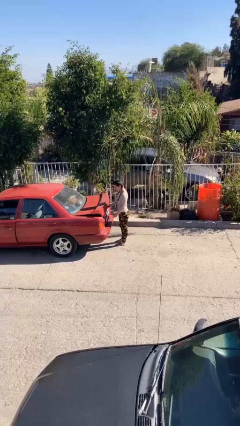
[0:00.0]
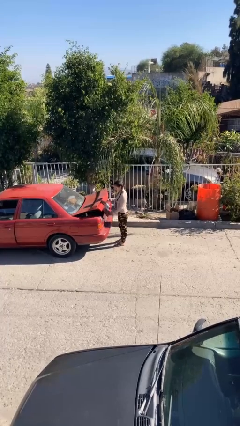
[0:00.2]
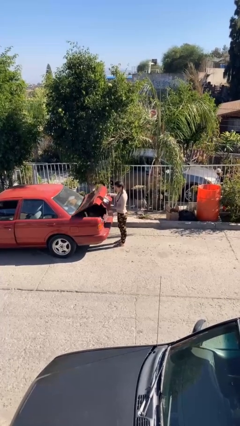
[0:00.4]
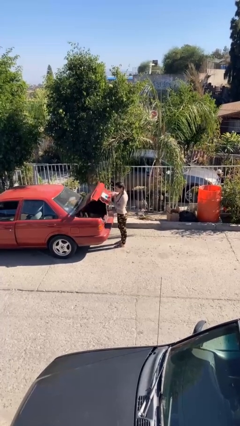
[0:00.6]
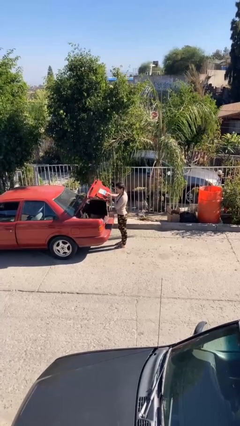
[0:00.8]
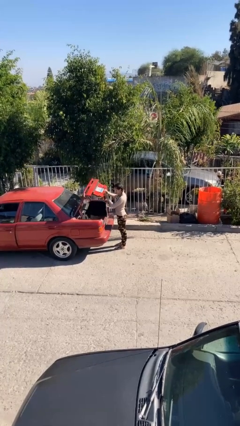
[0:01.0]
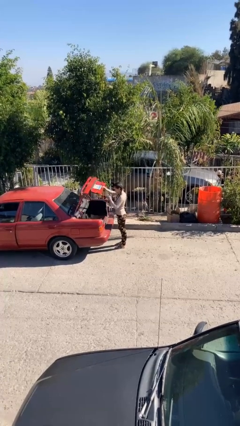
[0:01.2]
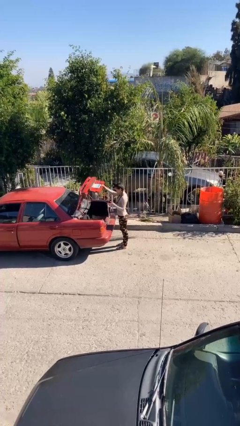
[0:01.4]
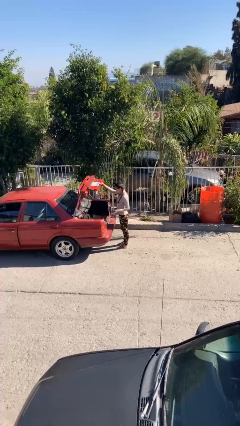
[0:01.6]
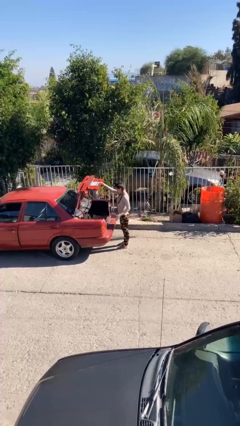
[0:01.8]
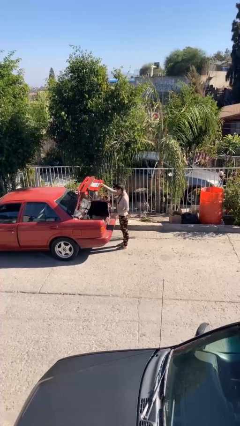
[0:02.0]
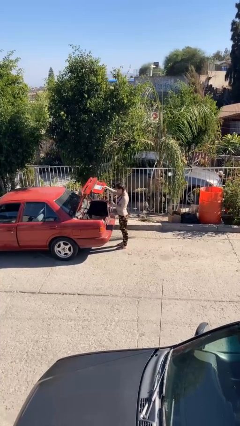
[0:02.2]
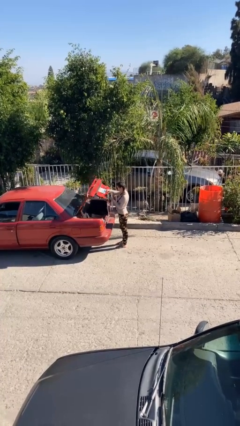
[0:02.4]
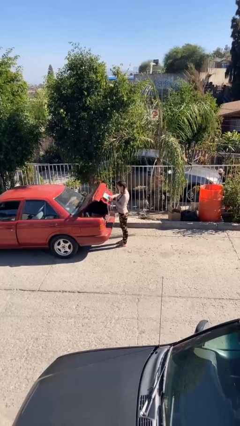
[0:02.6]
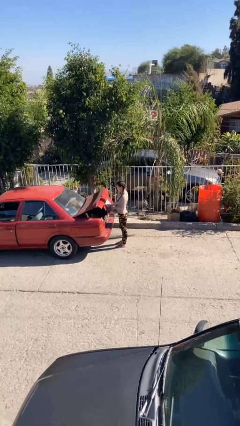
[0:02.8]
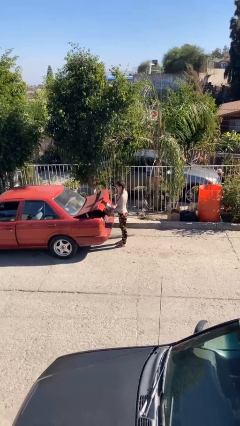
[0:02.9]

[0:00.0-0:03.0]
person opens car trunk

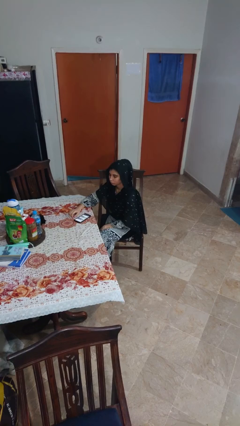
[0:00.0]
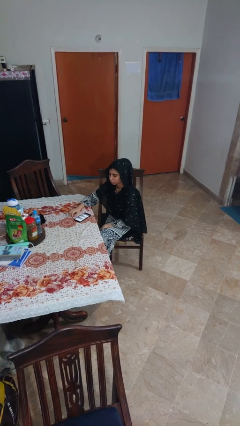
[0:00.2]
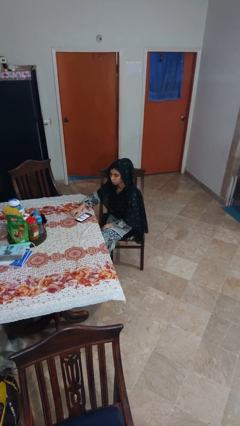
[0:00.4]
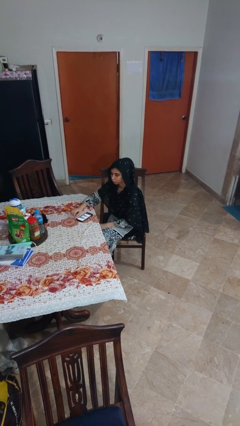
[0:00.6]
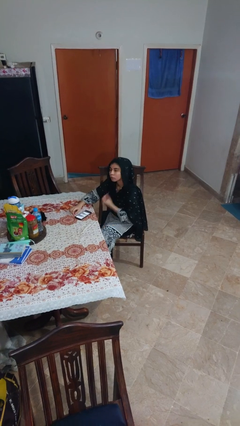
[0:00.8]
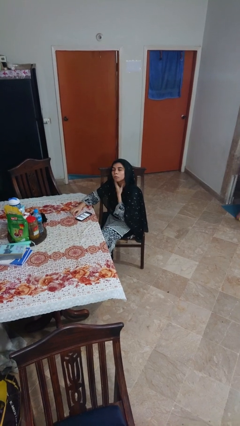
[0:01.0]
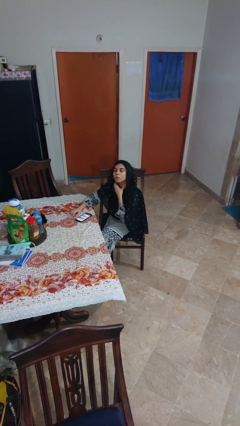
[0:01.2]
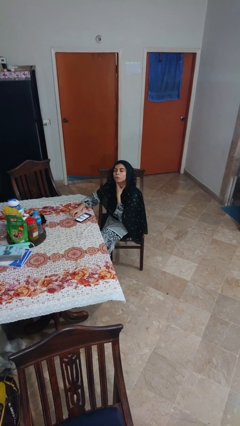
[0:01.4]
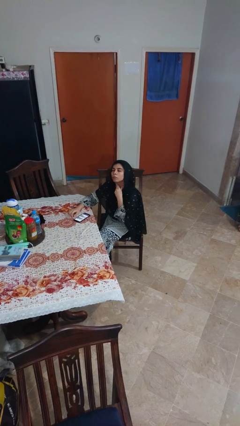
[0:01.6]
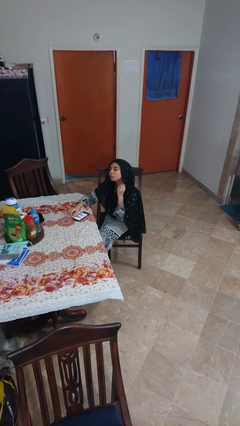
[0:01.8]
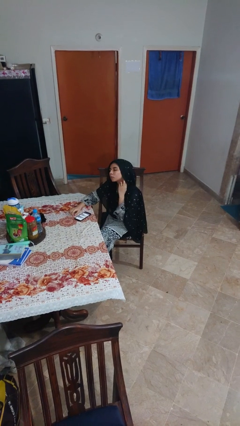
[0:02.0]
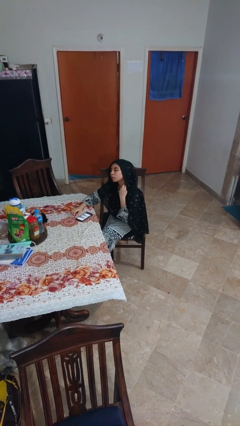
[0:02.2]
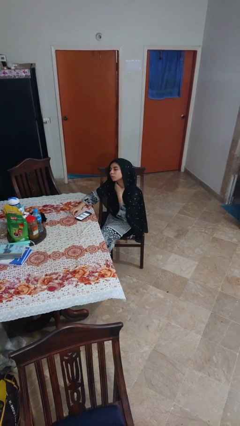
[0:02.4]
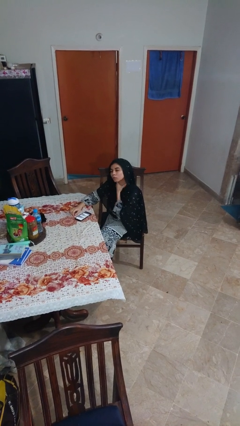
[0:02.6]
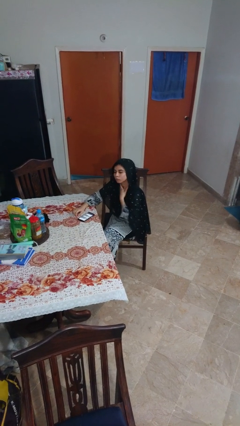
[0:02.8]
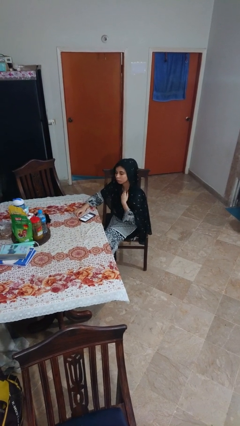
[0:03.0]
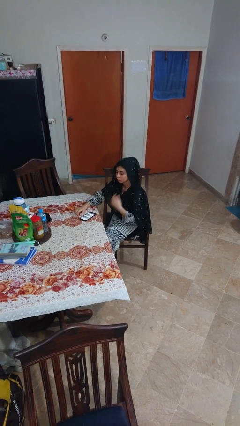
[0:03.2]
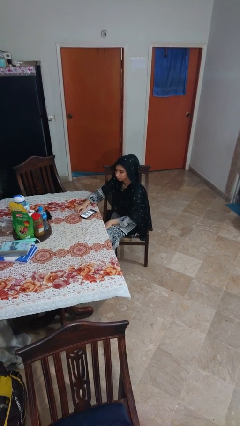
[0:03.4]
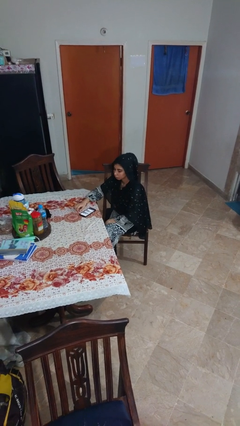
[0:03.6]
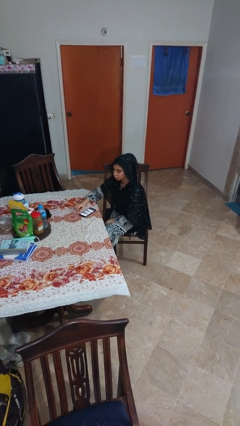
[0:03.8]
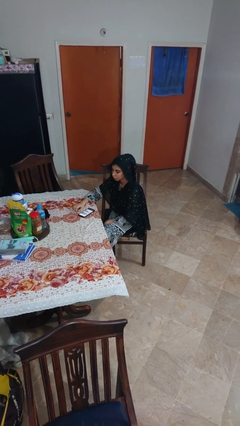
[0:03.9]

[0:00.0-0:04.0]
person rubs neck

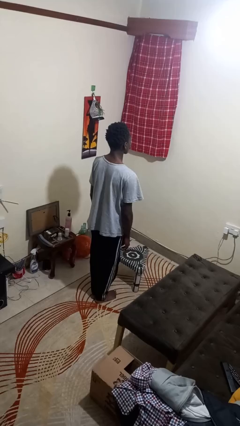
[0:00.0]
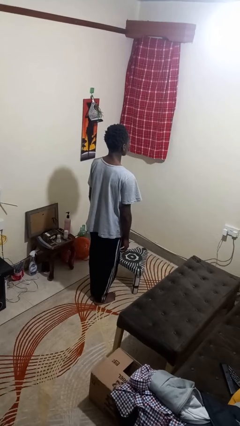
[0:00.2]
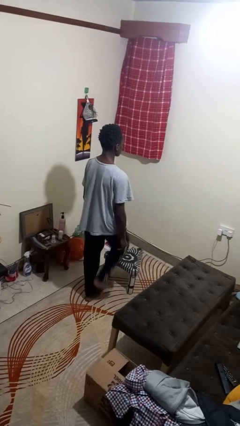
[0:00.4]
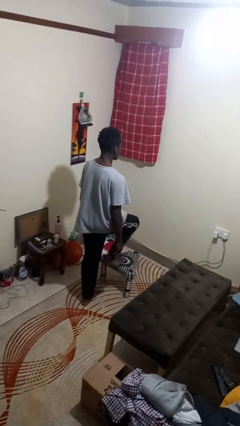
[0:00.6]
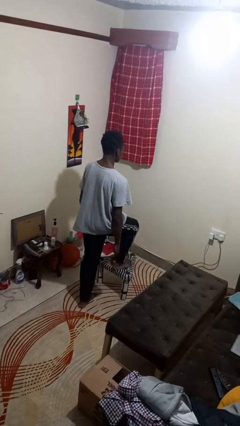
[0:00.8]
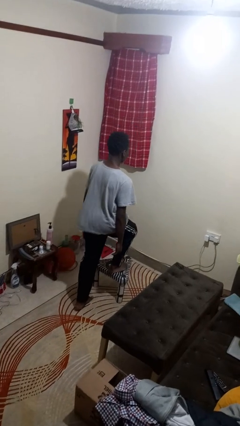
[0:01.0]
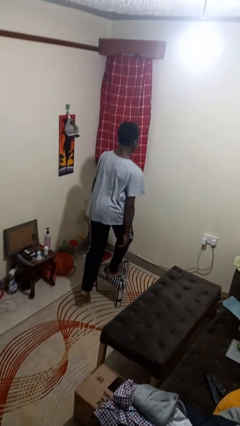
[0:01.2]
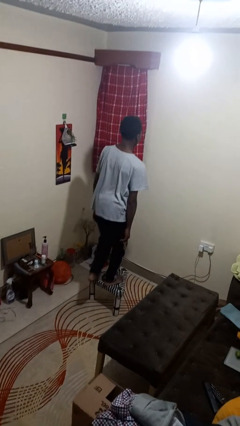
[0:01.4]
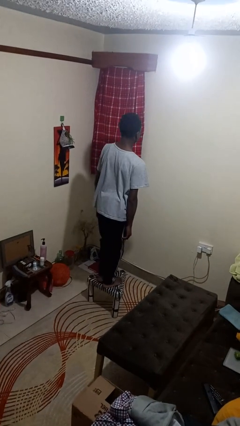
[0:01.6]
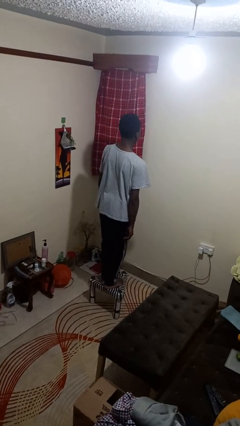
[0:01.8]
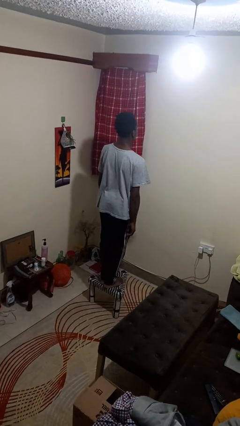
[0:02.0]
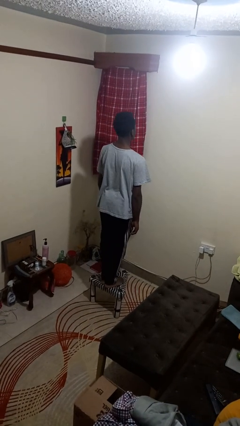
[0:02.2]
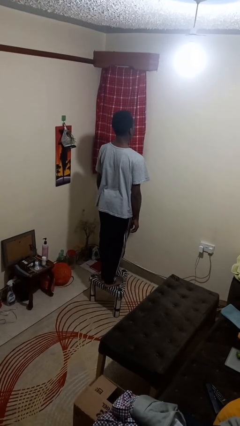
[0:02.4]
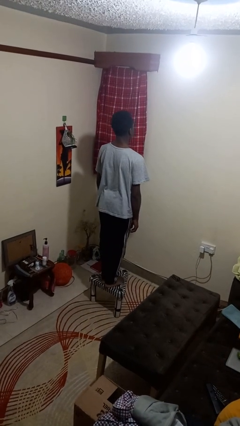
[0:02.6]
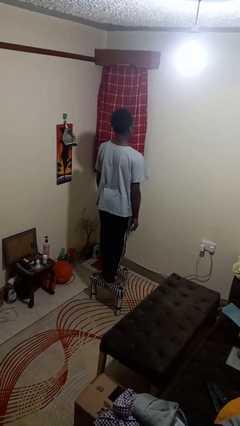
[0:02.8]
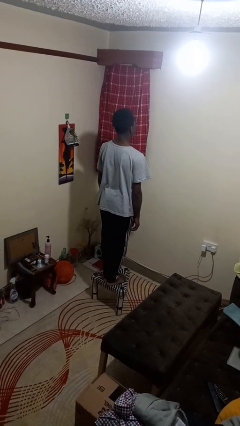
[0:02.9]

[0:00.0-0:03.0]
person climbs on chair

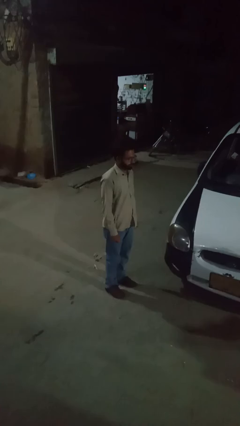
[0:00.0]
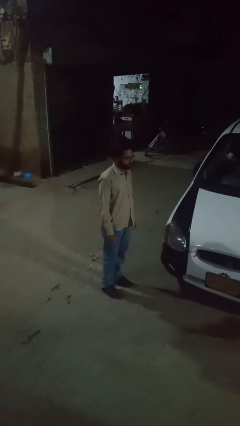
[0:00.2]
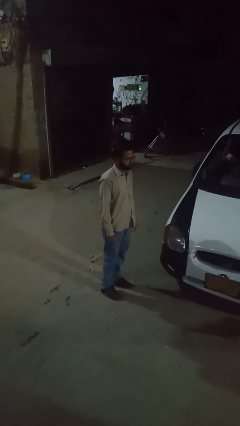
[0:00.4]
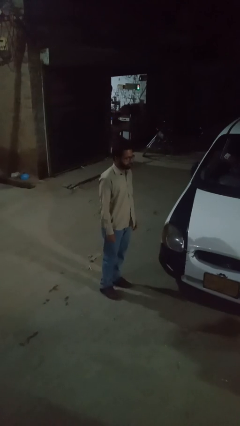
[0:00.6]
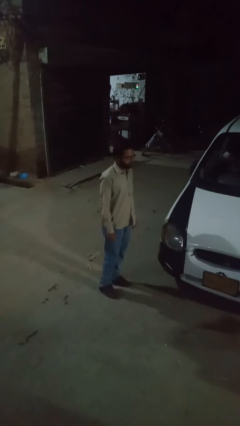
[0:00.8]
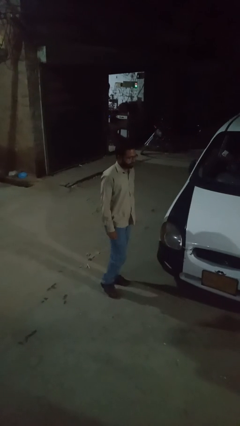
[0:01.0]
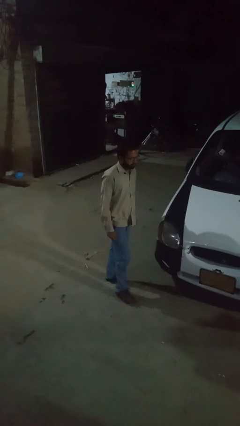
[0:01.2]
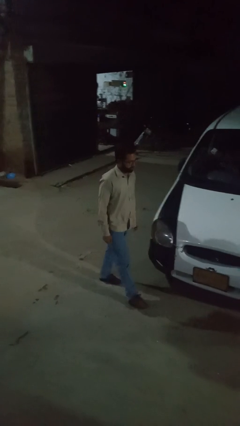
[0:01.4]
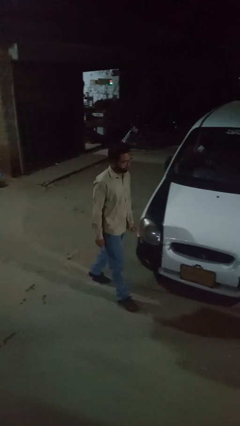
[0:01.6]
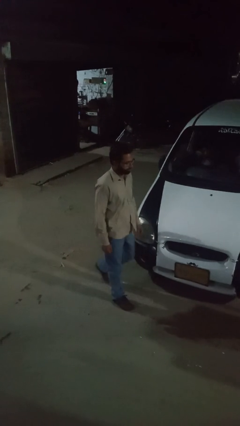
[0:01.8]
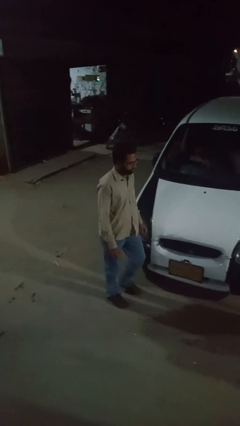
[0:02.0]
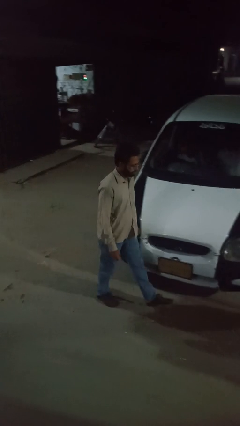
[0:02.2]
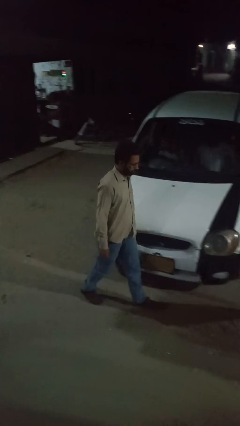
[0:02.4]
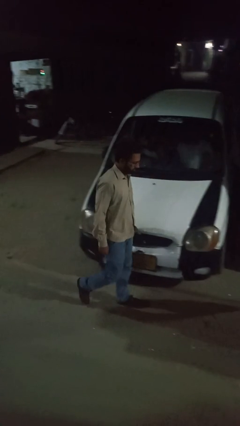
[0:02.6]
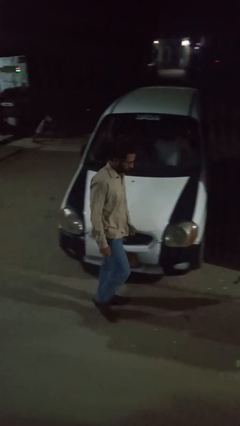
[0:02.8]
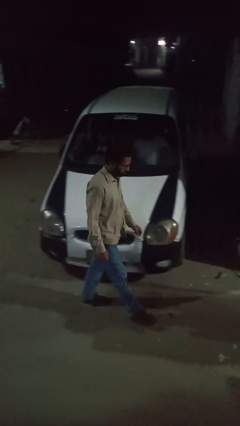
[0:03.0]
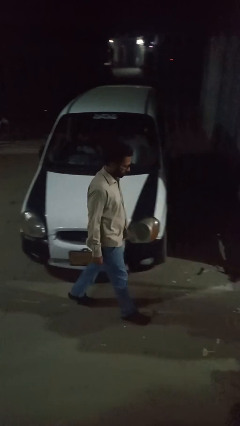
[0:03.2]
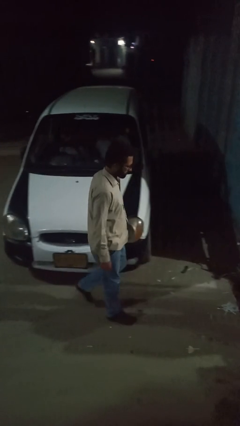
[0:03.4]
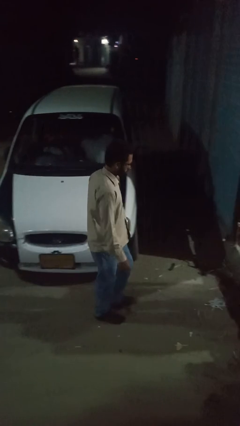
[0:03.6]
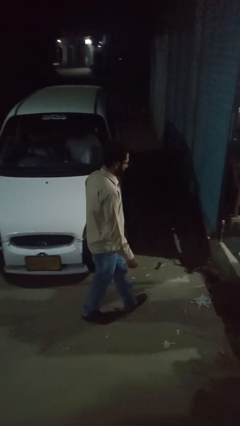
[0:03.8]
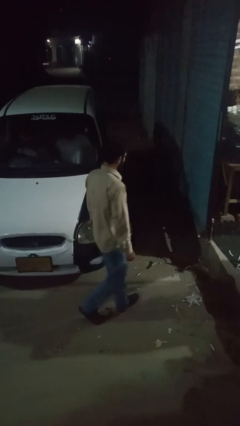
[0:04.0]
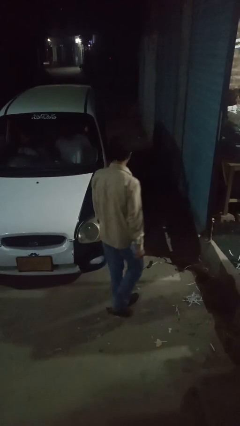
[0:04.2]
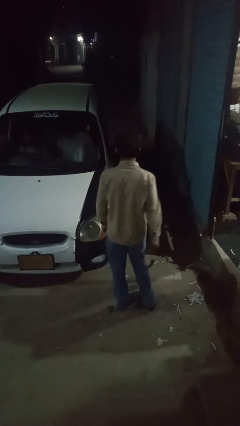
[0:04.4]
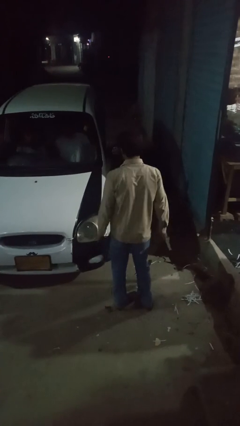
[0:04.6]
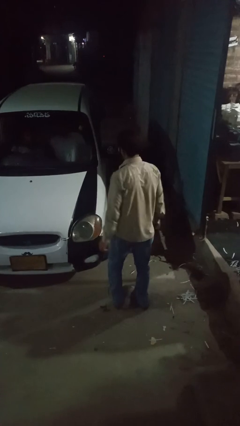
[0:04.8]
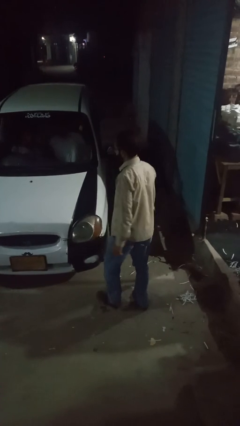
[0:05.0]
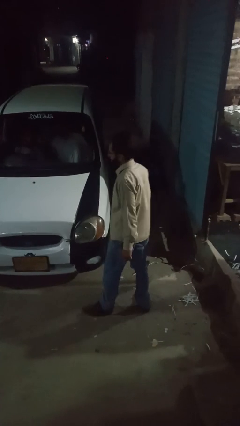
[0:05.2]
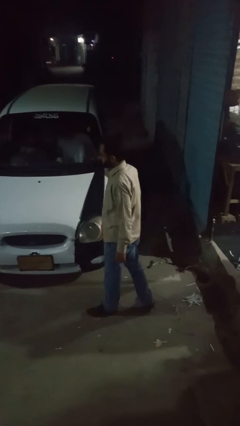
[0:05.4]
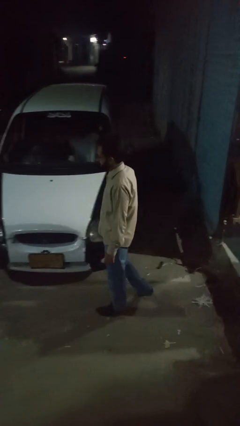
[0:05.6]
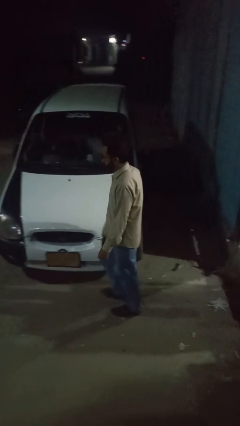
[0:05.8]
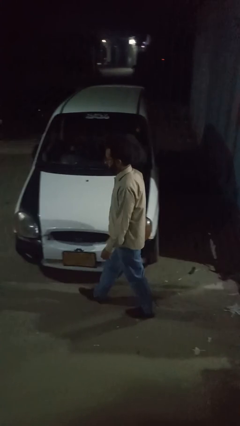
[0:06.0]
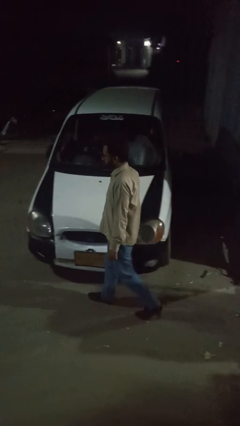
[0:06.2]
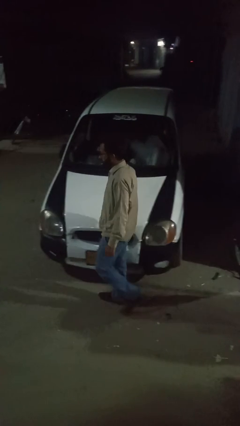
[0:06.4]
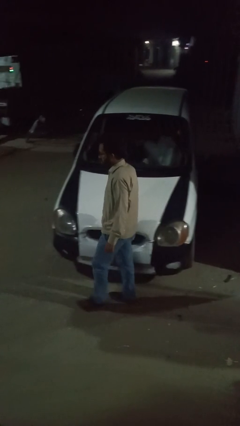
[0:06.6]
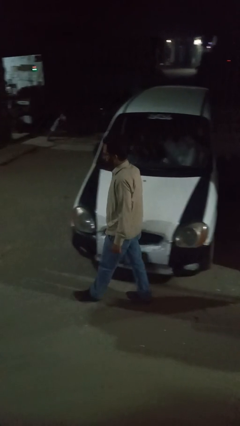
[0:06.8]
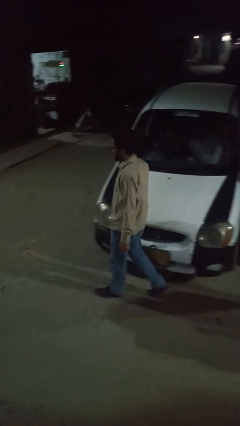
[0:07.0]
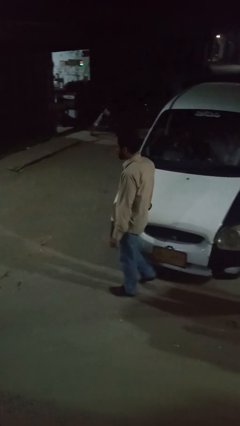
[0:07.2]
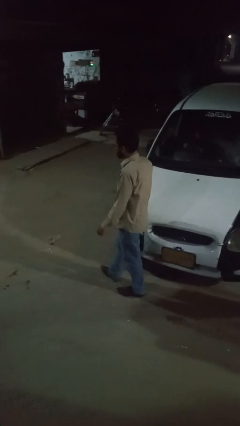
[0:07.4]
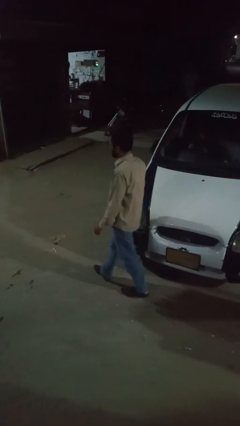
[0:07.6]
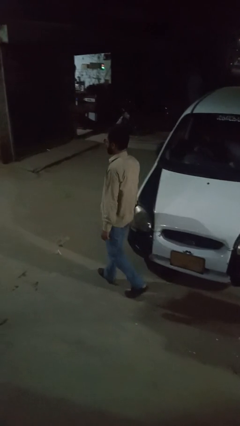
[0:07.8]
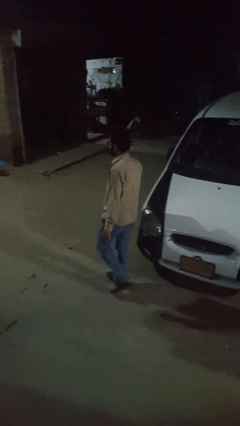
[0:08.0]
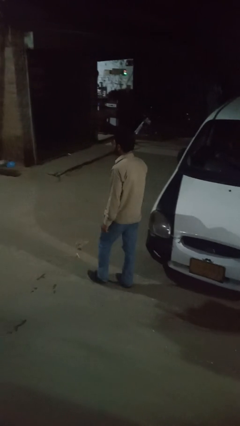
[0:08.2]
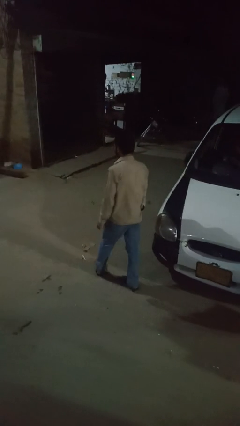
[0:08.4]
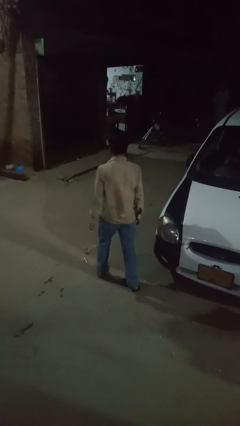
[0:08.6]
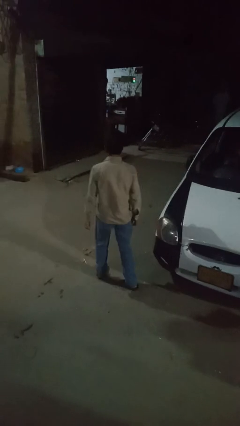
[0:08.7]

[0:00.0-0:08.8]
person walks around car
